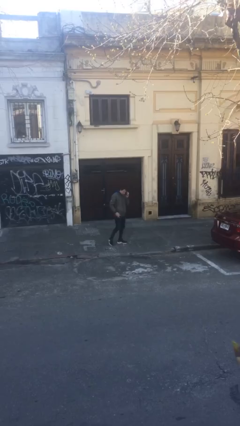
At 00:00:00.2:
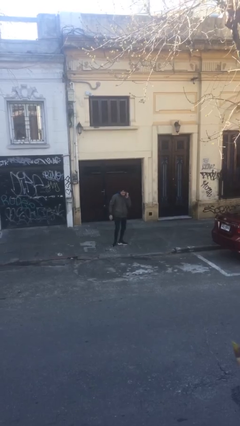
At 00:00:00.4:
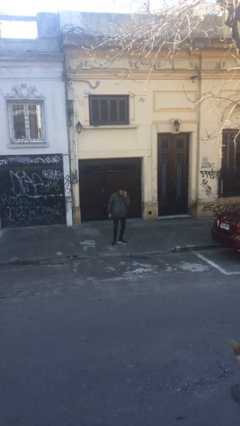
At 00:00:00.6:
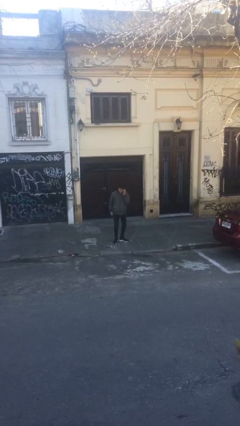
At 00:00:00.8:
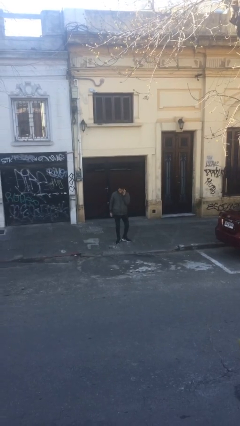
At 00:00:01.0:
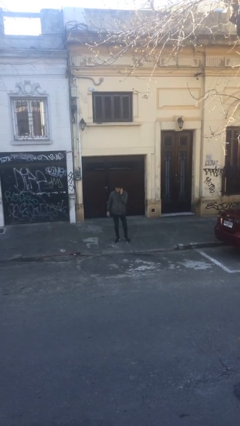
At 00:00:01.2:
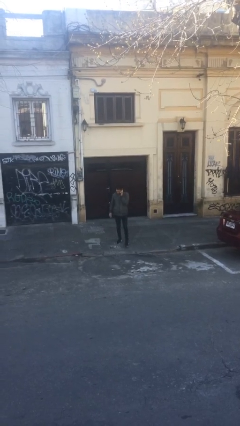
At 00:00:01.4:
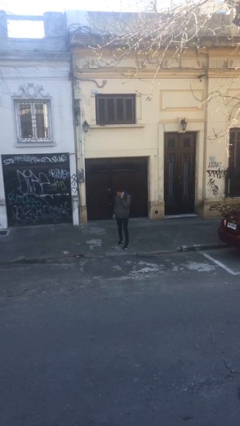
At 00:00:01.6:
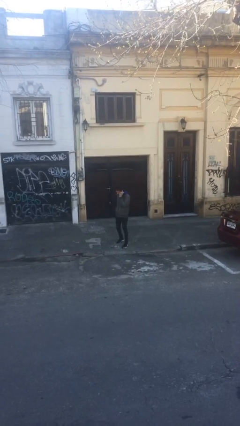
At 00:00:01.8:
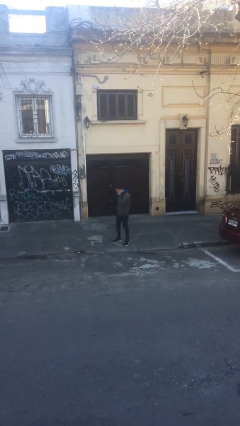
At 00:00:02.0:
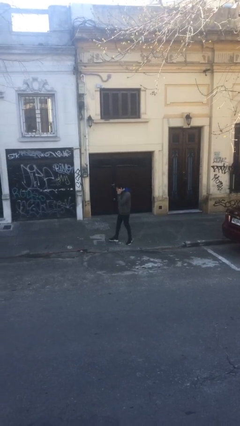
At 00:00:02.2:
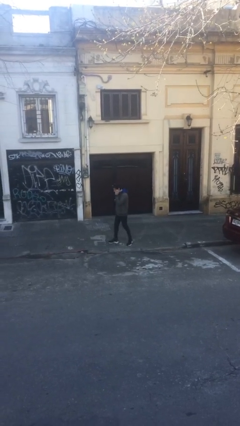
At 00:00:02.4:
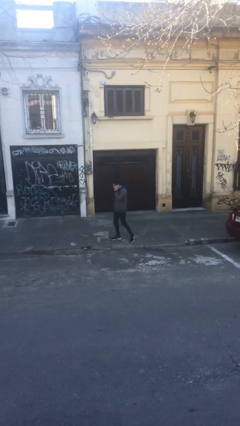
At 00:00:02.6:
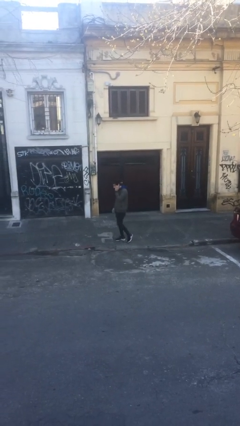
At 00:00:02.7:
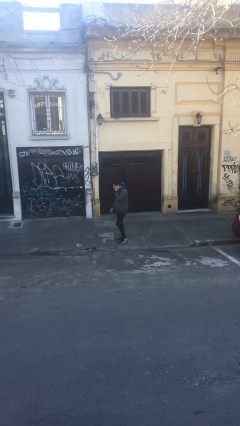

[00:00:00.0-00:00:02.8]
person talks on phone

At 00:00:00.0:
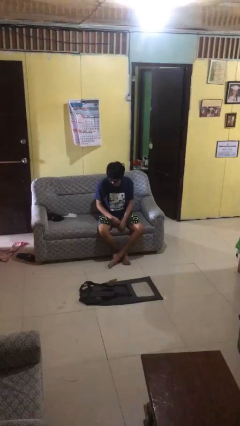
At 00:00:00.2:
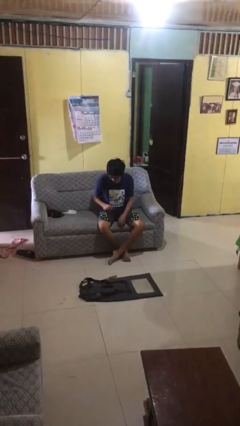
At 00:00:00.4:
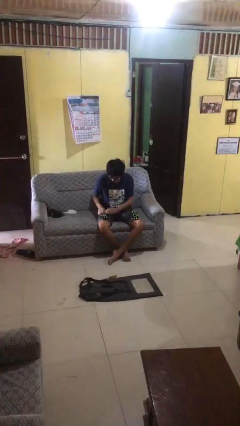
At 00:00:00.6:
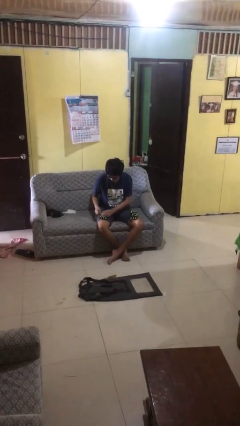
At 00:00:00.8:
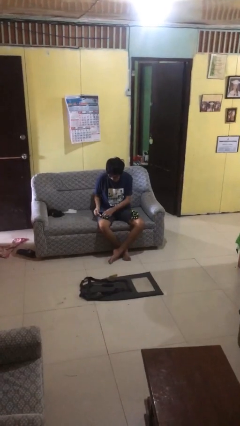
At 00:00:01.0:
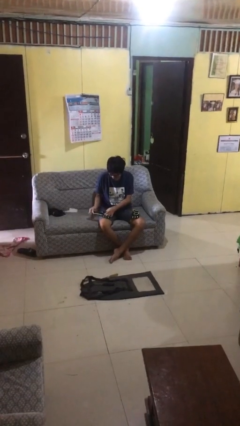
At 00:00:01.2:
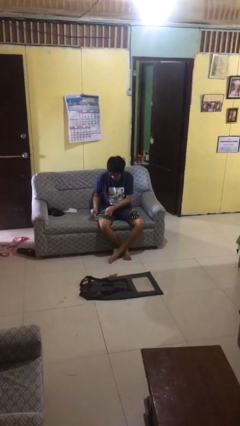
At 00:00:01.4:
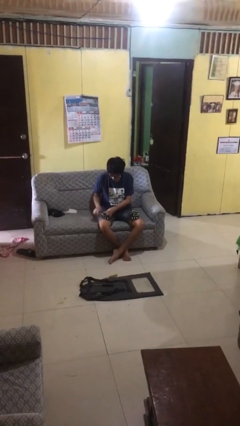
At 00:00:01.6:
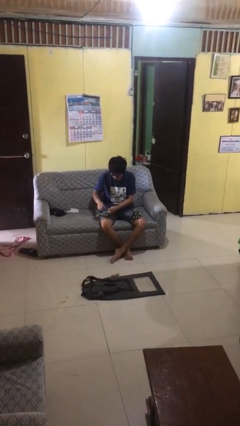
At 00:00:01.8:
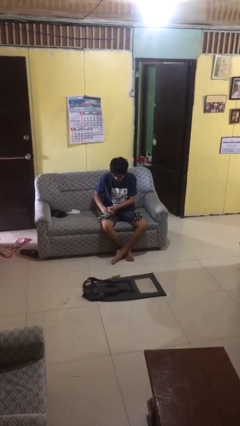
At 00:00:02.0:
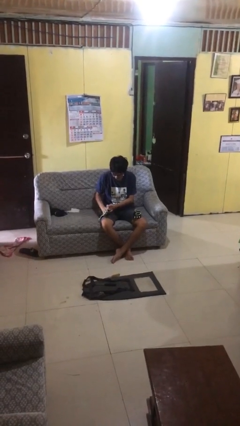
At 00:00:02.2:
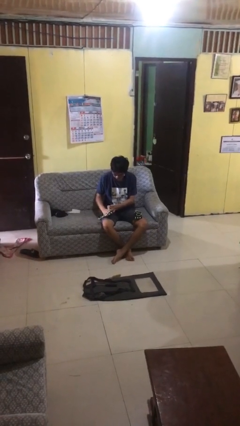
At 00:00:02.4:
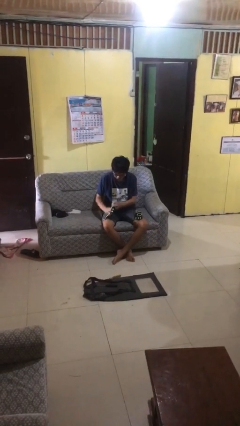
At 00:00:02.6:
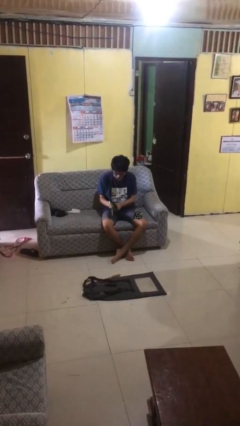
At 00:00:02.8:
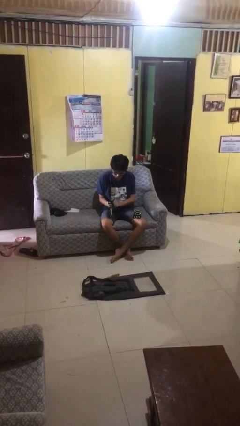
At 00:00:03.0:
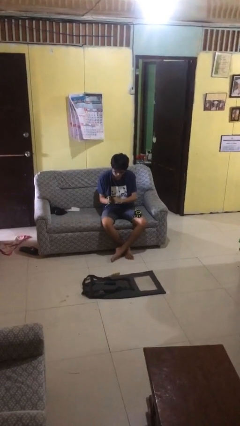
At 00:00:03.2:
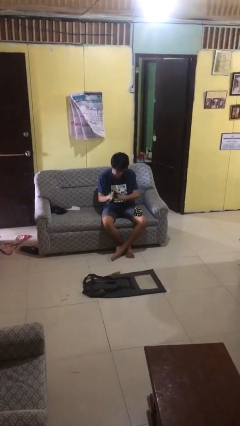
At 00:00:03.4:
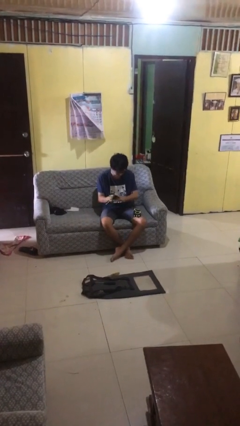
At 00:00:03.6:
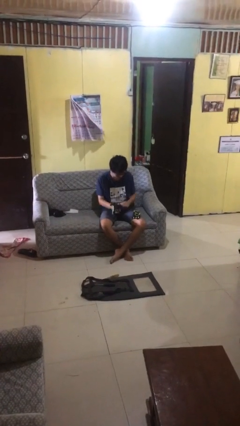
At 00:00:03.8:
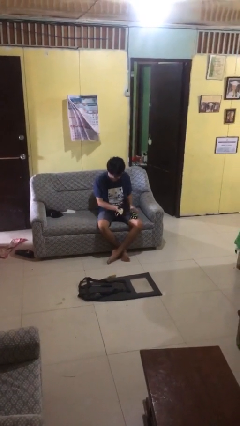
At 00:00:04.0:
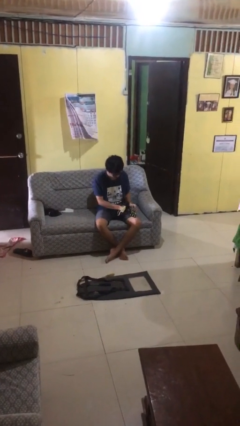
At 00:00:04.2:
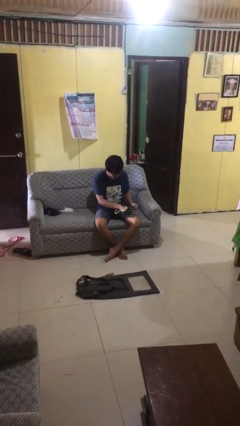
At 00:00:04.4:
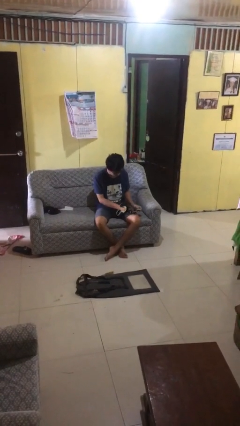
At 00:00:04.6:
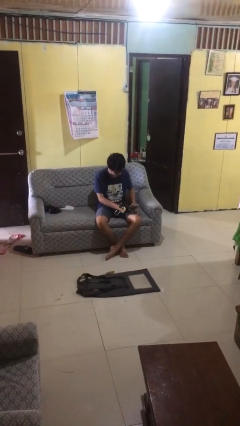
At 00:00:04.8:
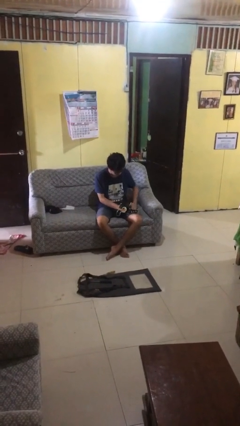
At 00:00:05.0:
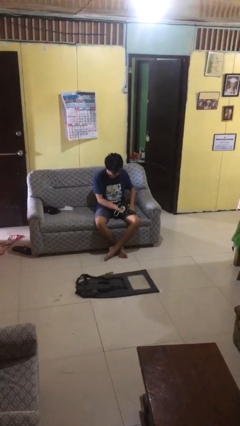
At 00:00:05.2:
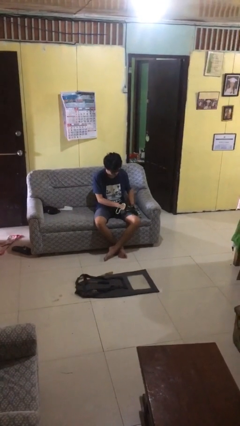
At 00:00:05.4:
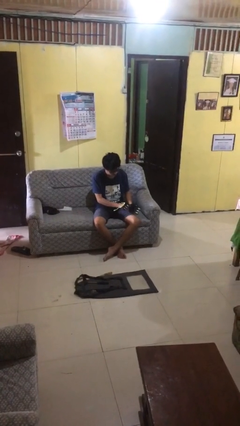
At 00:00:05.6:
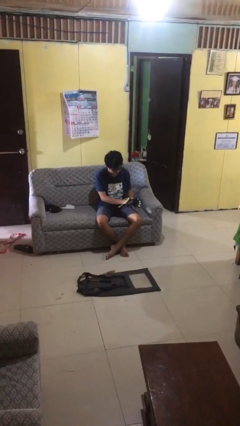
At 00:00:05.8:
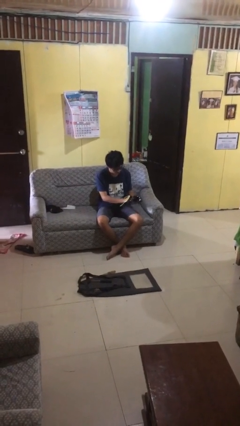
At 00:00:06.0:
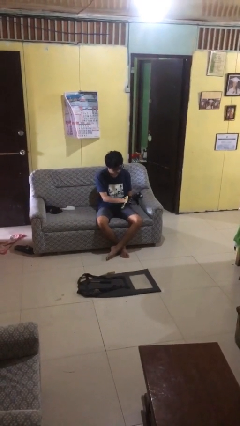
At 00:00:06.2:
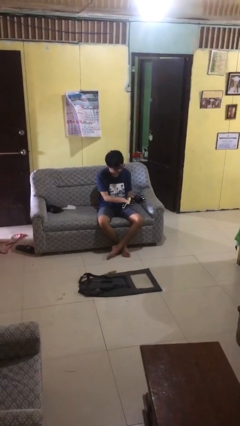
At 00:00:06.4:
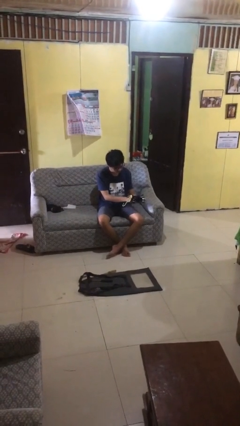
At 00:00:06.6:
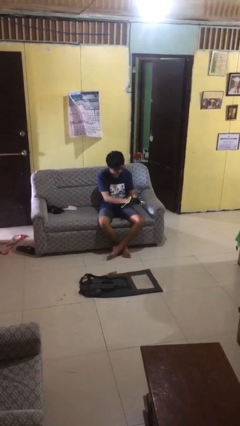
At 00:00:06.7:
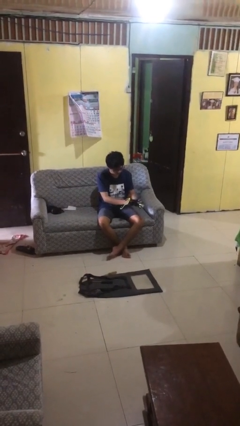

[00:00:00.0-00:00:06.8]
person puts on gloves

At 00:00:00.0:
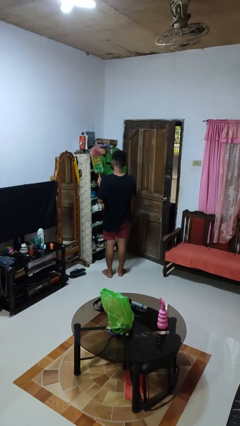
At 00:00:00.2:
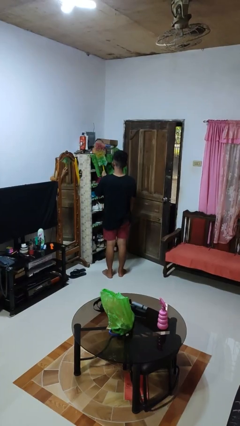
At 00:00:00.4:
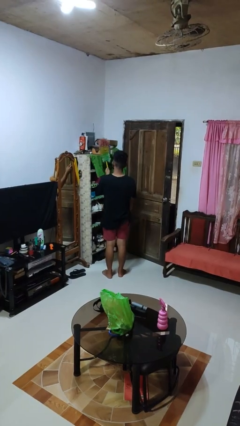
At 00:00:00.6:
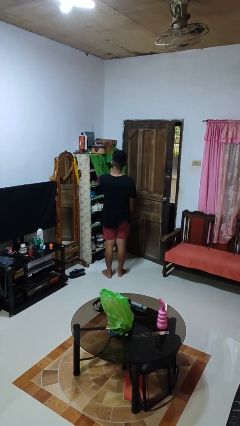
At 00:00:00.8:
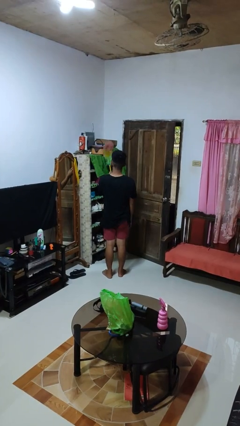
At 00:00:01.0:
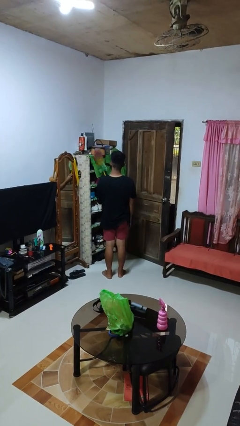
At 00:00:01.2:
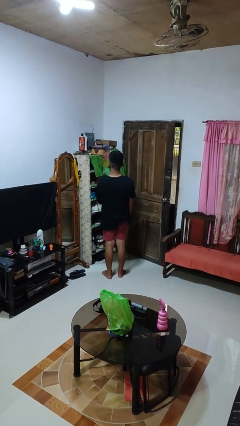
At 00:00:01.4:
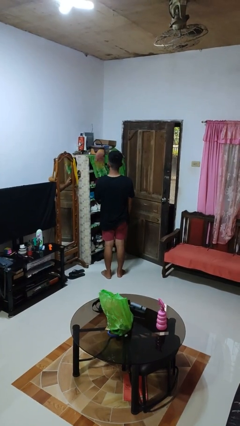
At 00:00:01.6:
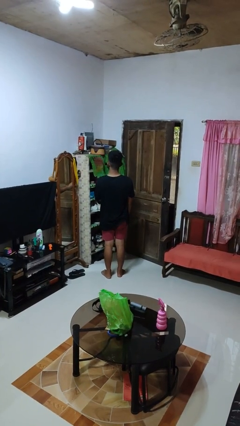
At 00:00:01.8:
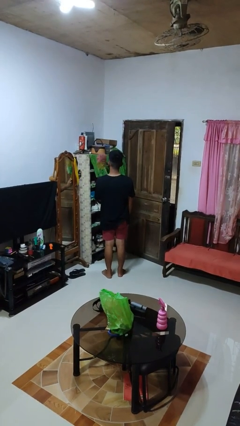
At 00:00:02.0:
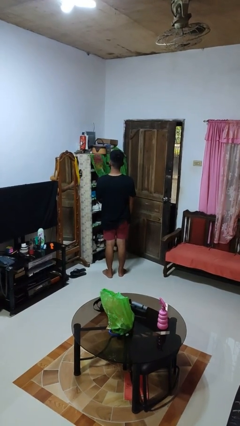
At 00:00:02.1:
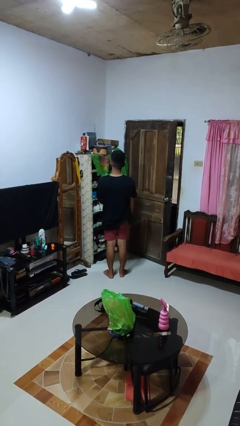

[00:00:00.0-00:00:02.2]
person dusts furniture

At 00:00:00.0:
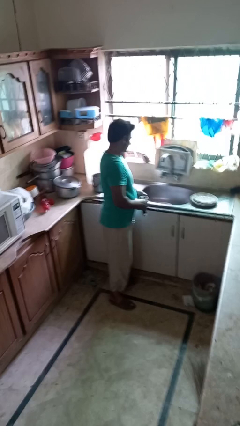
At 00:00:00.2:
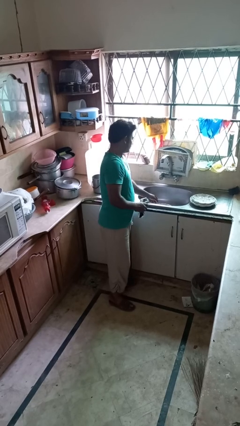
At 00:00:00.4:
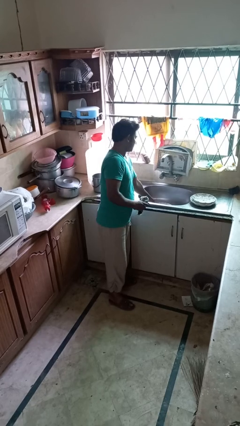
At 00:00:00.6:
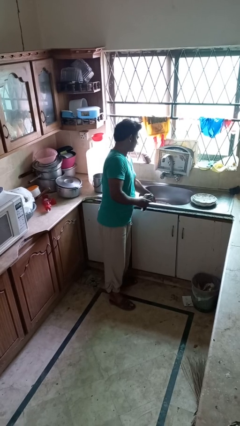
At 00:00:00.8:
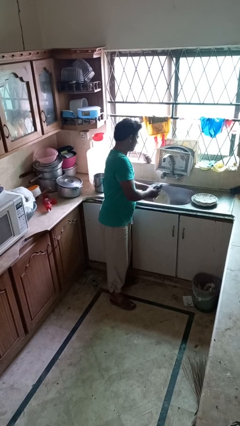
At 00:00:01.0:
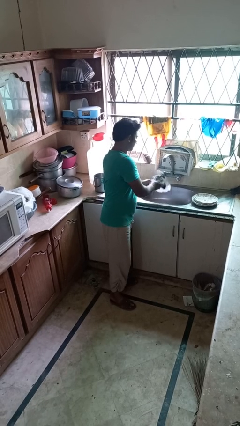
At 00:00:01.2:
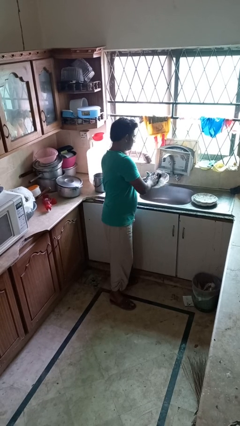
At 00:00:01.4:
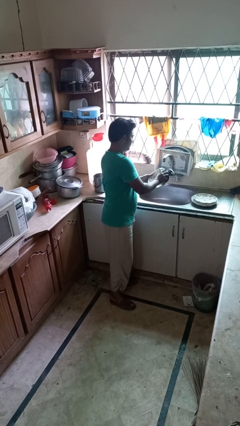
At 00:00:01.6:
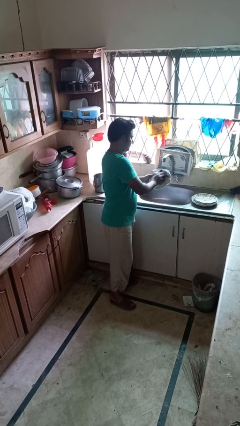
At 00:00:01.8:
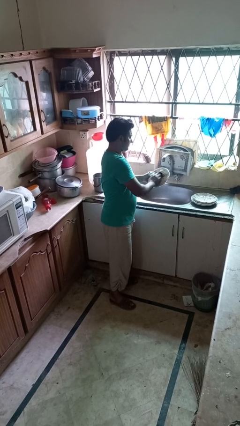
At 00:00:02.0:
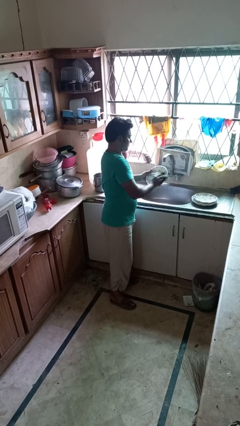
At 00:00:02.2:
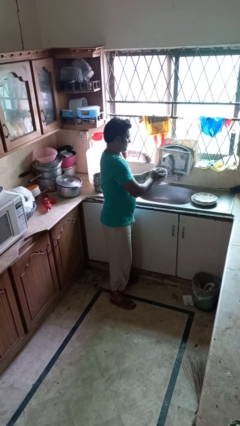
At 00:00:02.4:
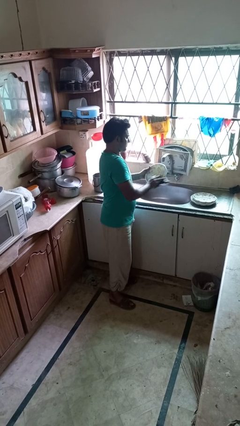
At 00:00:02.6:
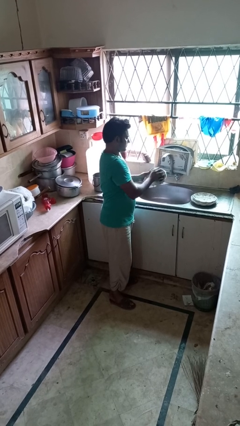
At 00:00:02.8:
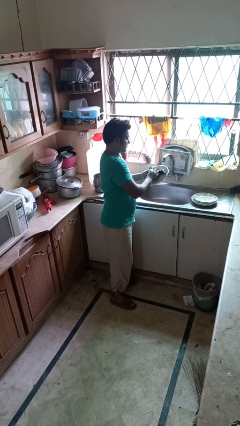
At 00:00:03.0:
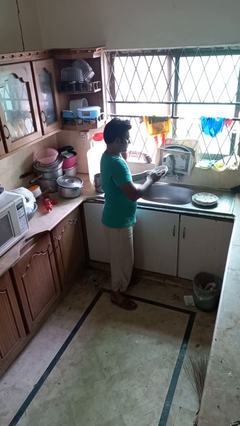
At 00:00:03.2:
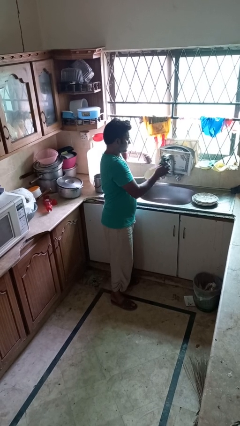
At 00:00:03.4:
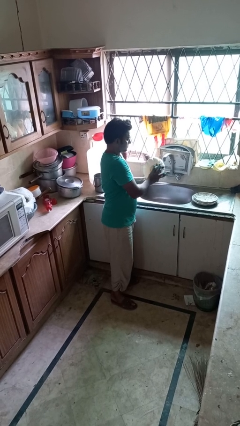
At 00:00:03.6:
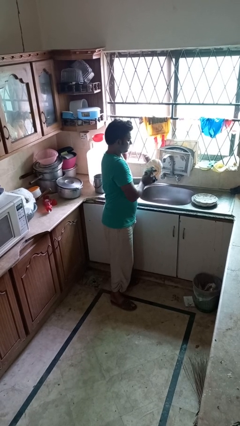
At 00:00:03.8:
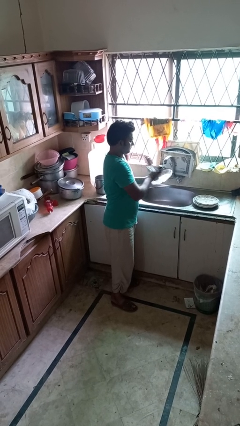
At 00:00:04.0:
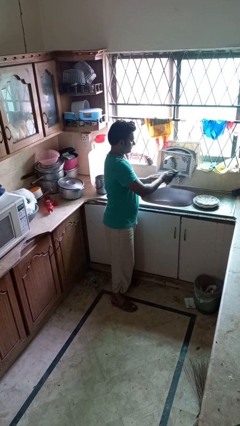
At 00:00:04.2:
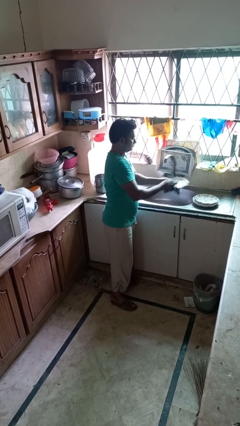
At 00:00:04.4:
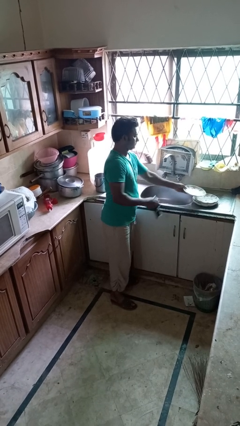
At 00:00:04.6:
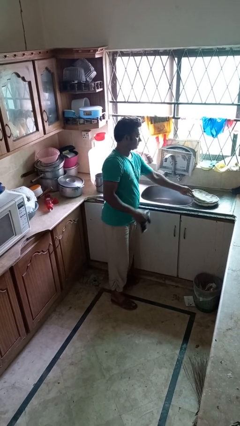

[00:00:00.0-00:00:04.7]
person dries dish

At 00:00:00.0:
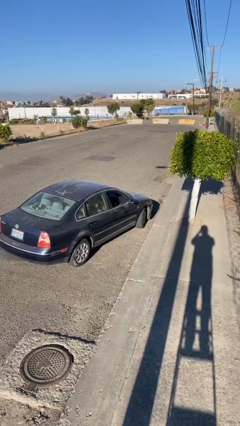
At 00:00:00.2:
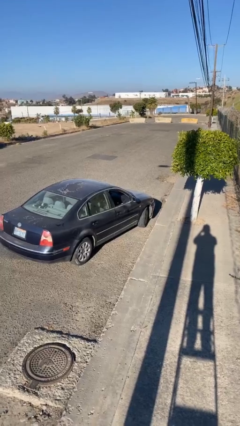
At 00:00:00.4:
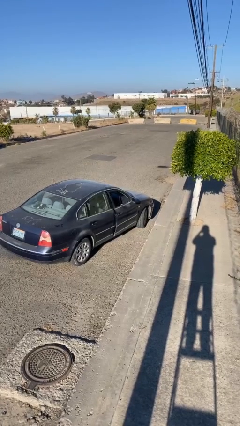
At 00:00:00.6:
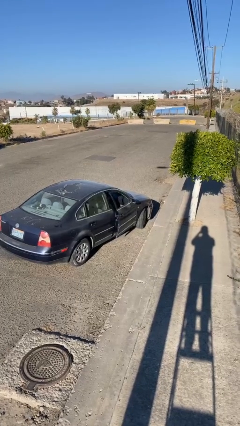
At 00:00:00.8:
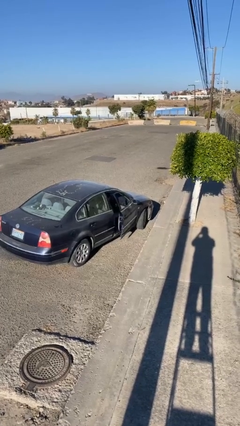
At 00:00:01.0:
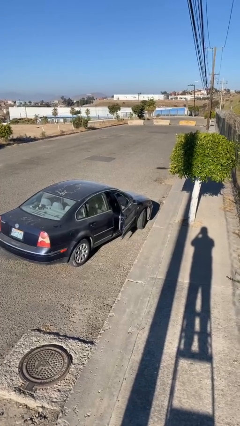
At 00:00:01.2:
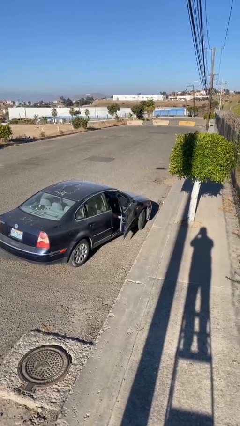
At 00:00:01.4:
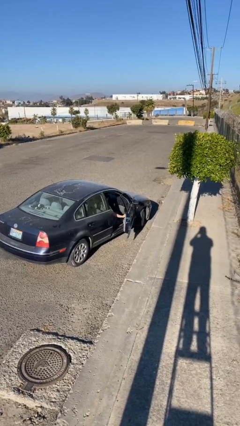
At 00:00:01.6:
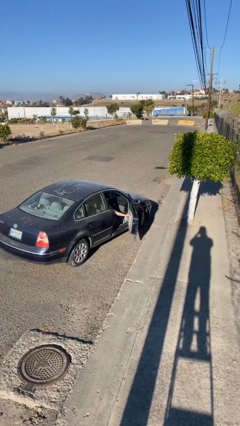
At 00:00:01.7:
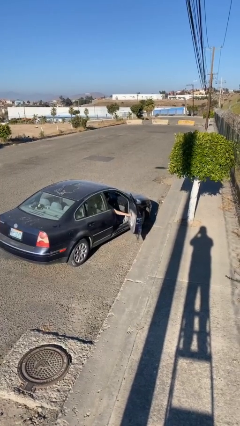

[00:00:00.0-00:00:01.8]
person opens car door
